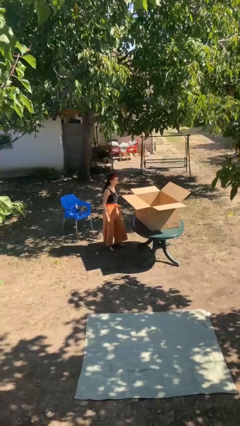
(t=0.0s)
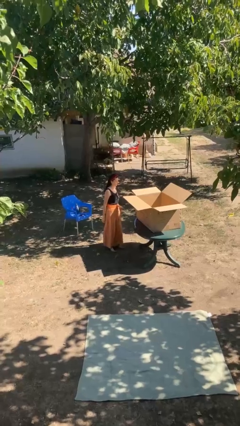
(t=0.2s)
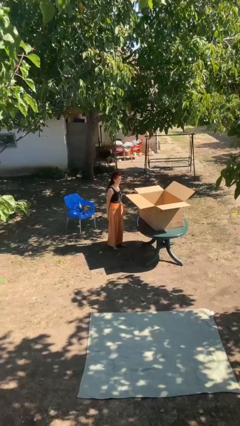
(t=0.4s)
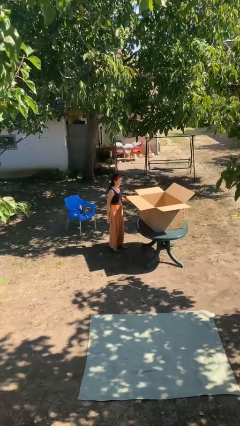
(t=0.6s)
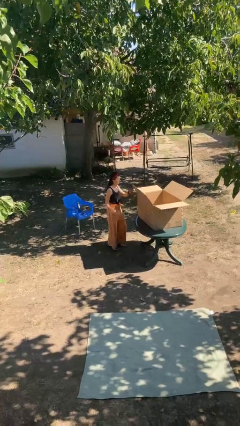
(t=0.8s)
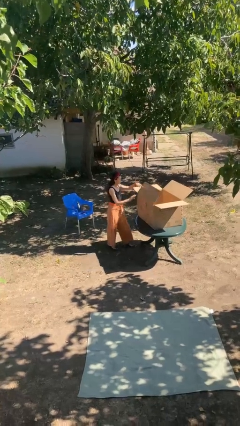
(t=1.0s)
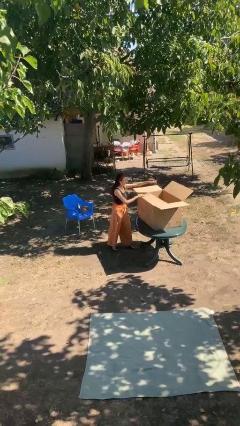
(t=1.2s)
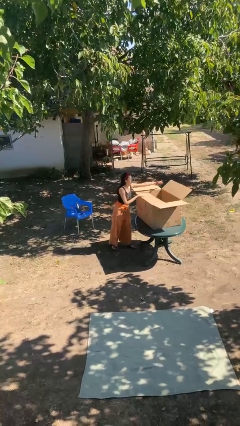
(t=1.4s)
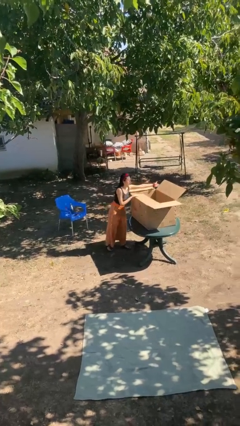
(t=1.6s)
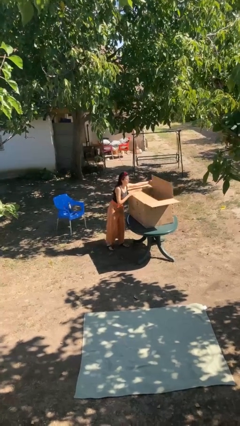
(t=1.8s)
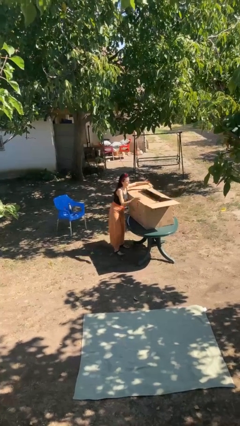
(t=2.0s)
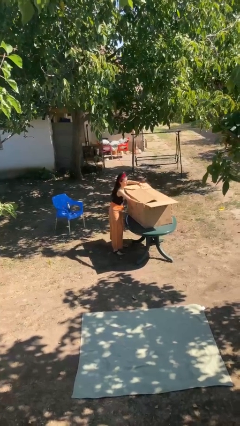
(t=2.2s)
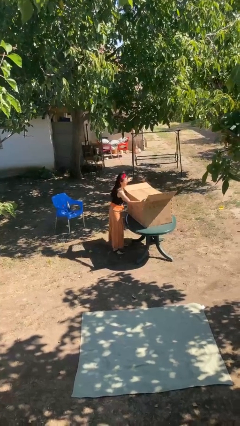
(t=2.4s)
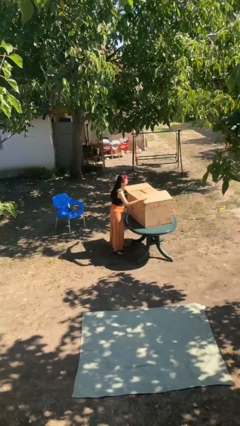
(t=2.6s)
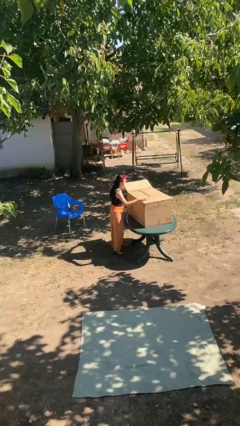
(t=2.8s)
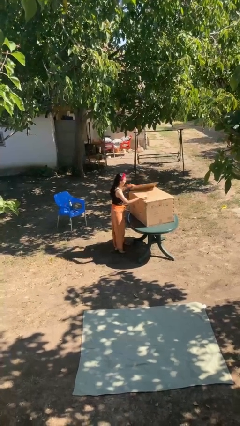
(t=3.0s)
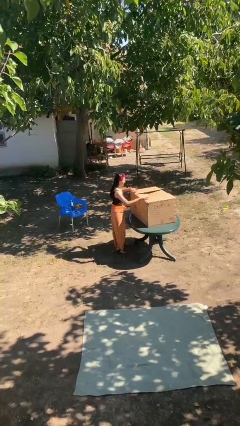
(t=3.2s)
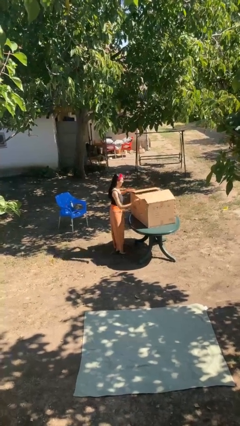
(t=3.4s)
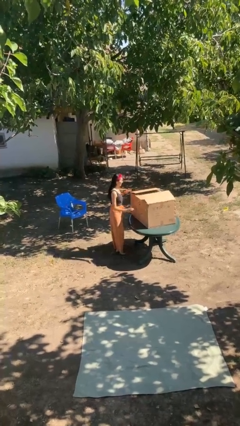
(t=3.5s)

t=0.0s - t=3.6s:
person closes box

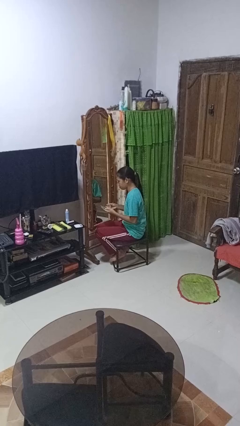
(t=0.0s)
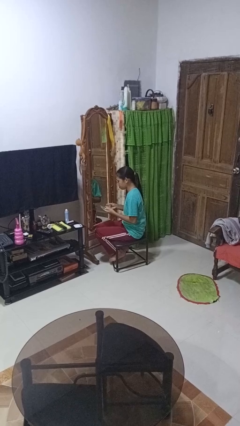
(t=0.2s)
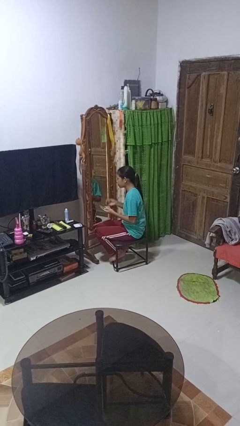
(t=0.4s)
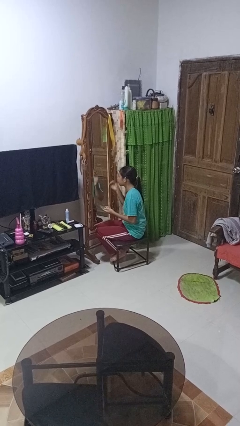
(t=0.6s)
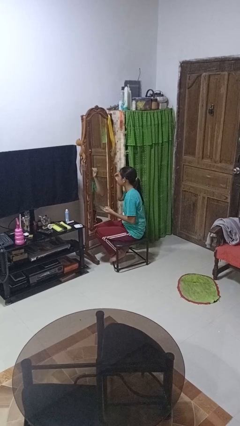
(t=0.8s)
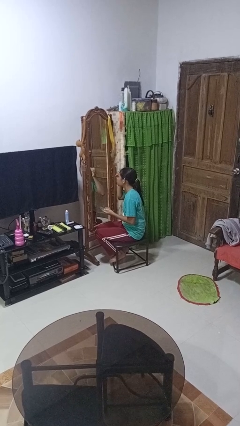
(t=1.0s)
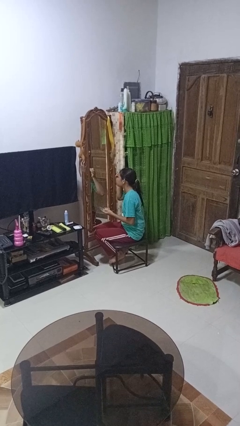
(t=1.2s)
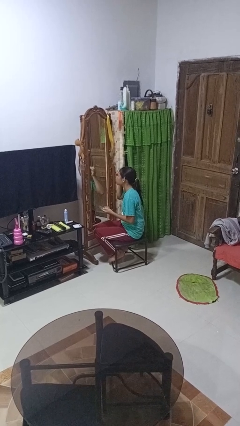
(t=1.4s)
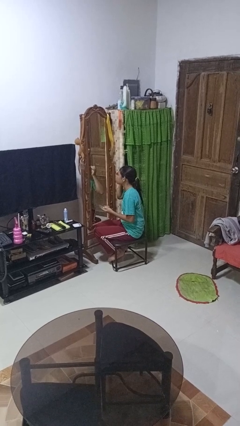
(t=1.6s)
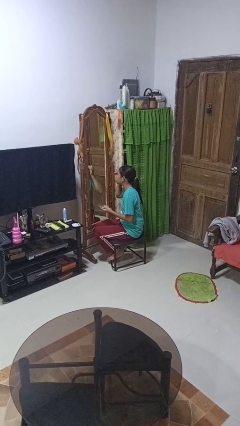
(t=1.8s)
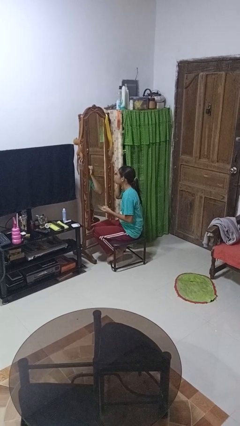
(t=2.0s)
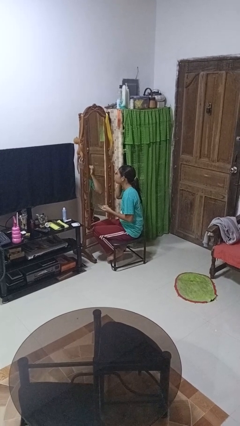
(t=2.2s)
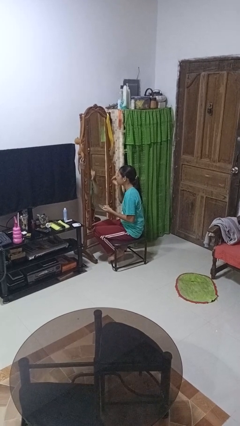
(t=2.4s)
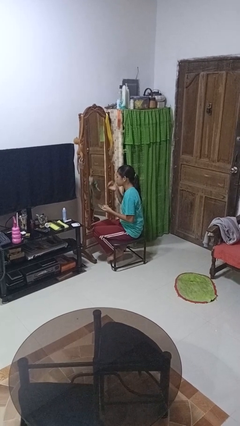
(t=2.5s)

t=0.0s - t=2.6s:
person applies eye makeup

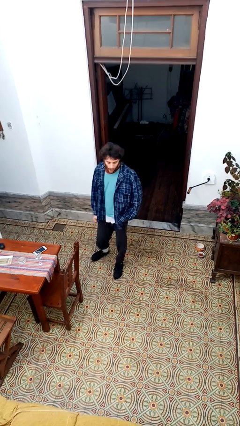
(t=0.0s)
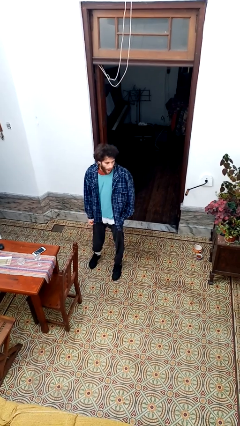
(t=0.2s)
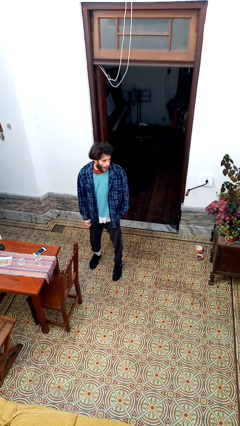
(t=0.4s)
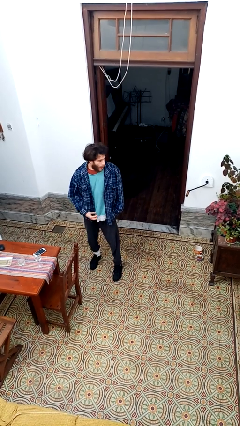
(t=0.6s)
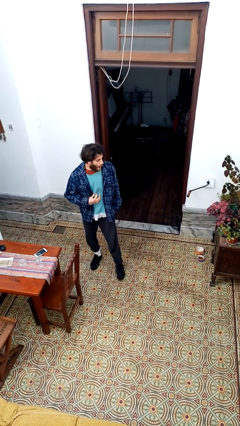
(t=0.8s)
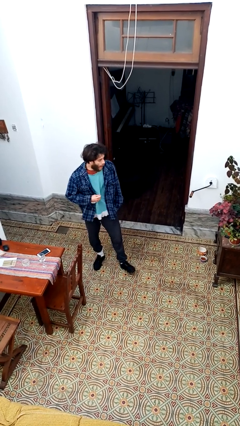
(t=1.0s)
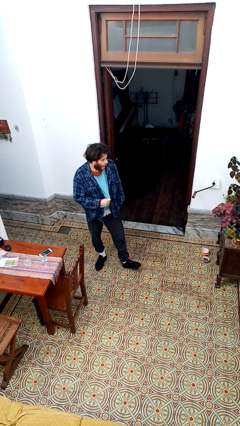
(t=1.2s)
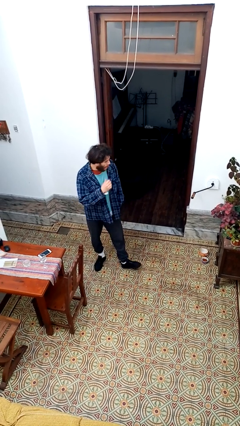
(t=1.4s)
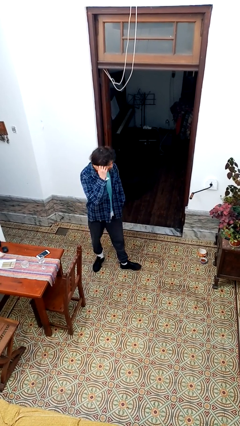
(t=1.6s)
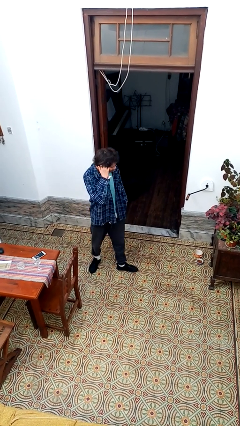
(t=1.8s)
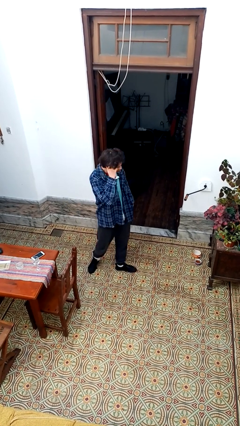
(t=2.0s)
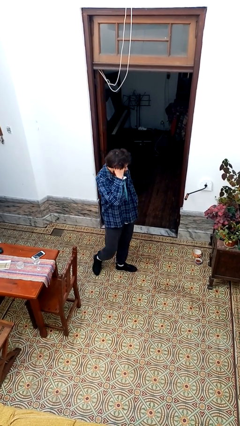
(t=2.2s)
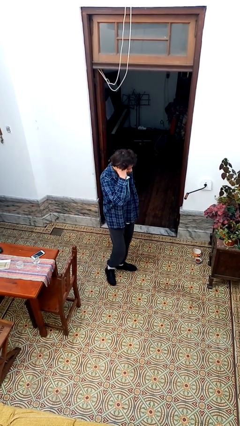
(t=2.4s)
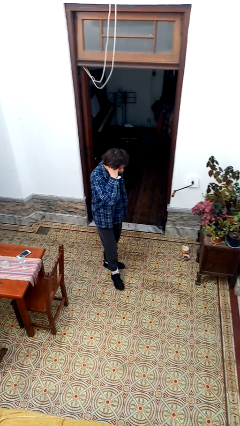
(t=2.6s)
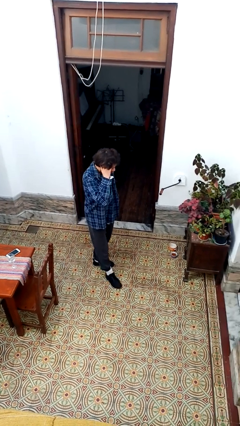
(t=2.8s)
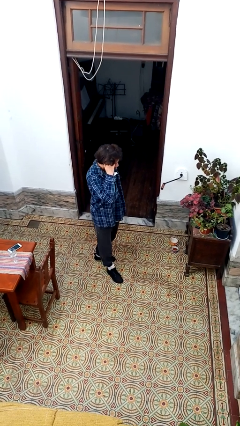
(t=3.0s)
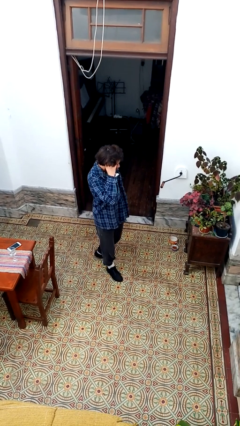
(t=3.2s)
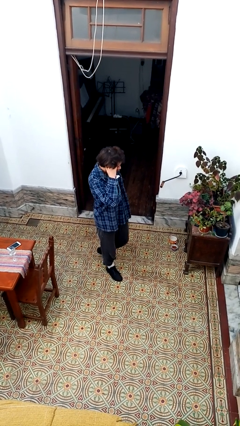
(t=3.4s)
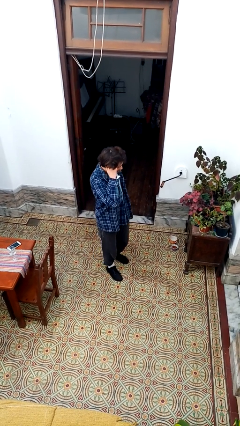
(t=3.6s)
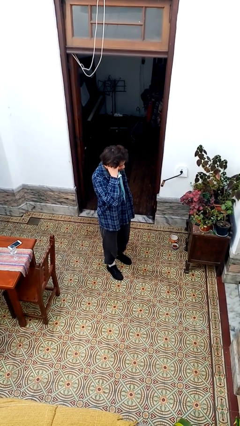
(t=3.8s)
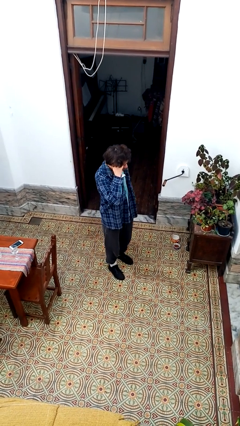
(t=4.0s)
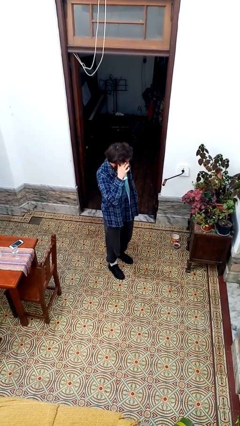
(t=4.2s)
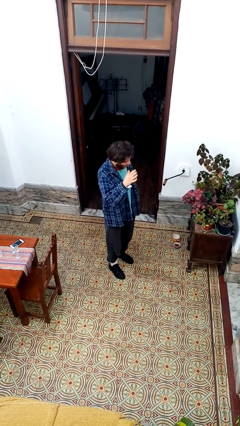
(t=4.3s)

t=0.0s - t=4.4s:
person scratches face

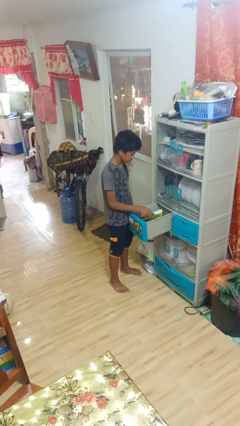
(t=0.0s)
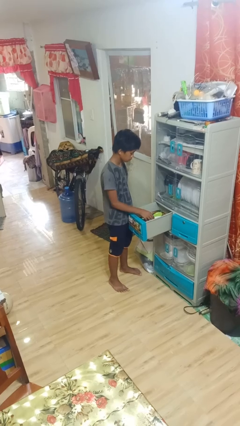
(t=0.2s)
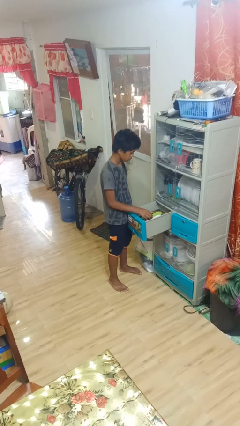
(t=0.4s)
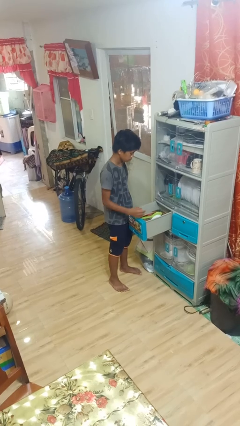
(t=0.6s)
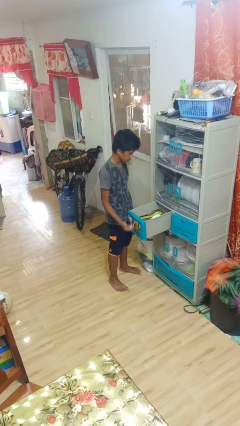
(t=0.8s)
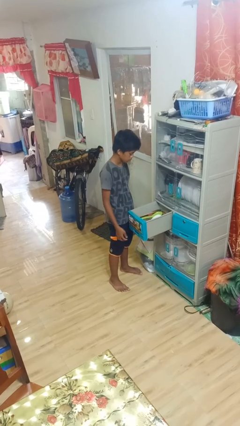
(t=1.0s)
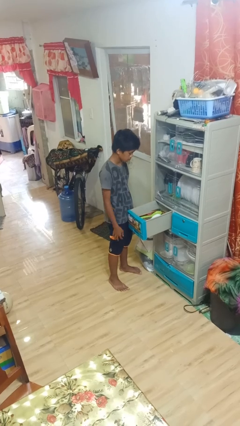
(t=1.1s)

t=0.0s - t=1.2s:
person puts object into kitchen drawer

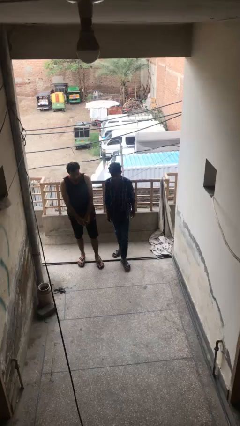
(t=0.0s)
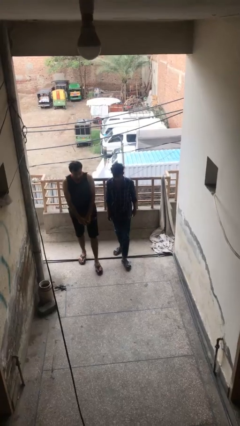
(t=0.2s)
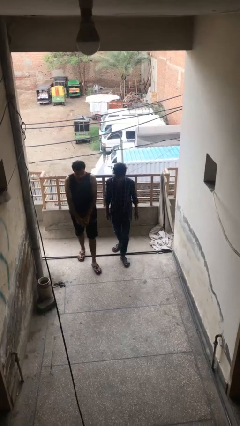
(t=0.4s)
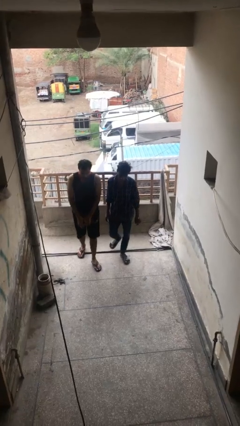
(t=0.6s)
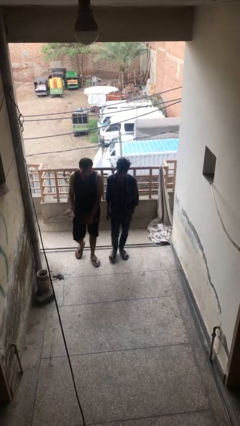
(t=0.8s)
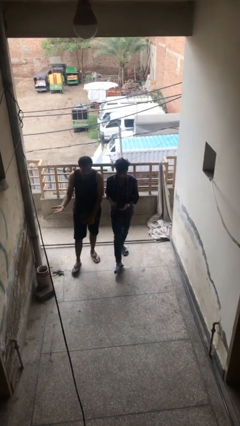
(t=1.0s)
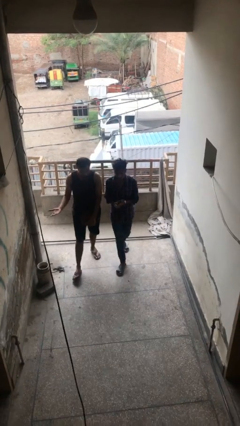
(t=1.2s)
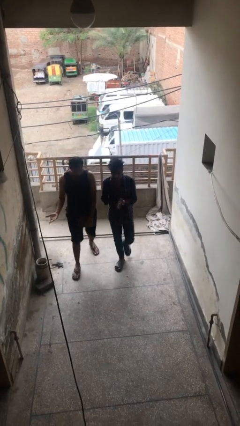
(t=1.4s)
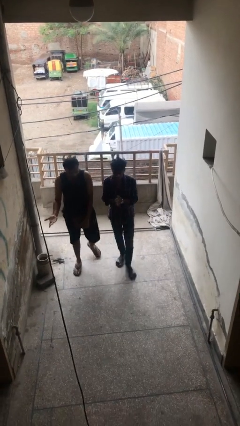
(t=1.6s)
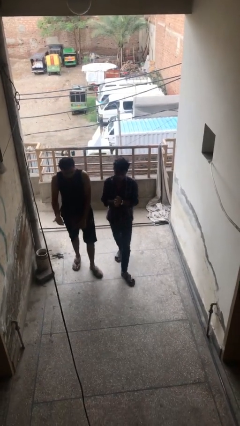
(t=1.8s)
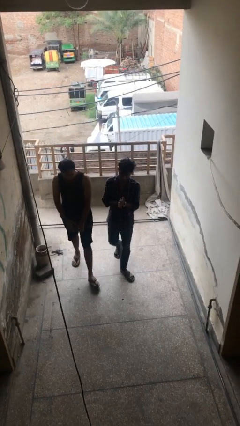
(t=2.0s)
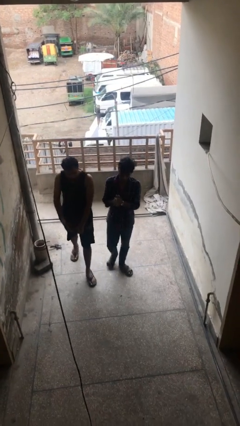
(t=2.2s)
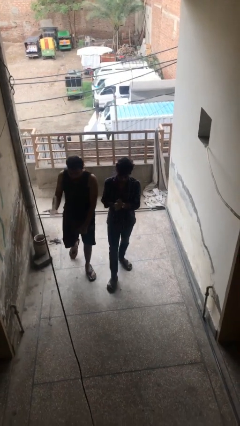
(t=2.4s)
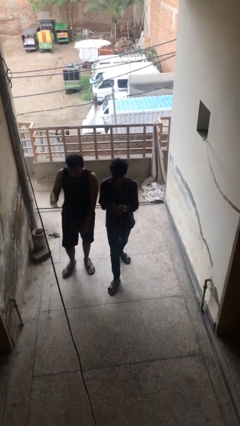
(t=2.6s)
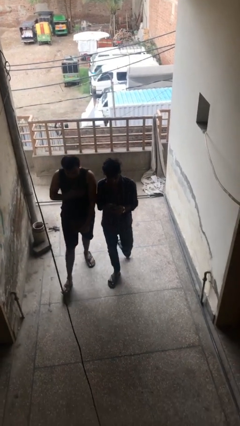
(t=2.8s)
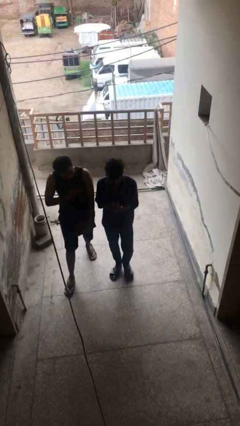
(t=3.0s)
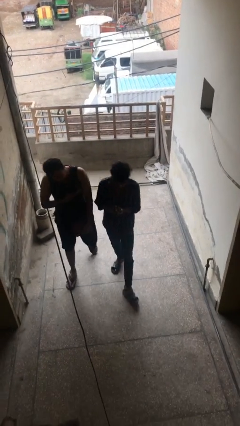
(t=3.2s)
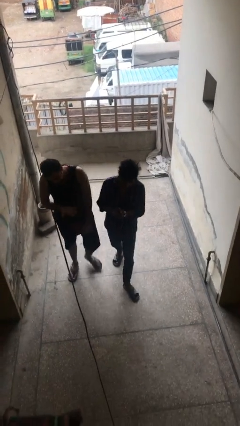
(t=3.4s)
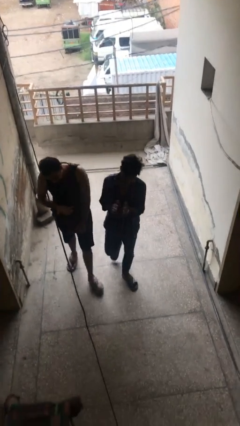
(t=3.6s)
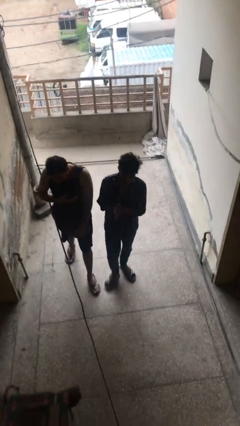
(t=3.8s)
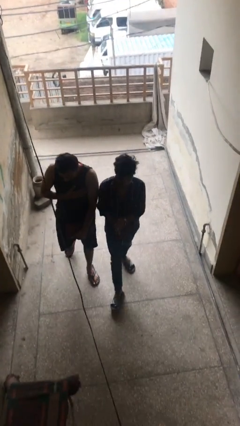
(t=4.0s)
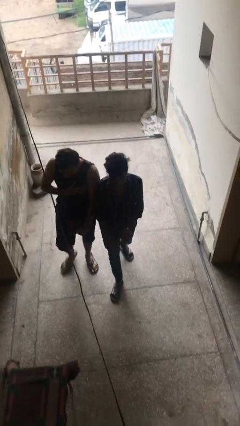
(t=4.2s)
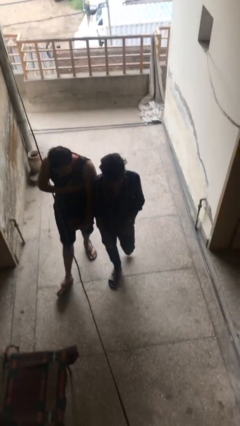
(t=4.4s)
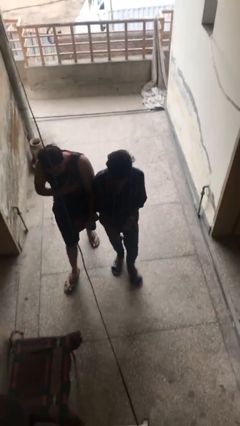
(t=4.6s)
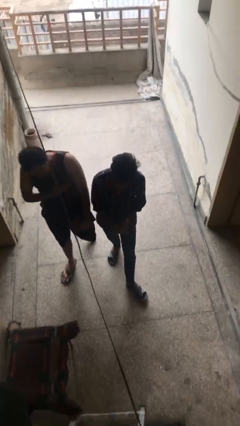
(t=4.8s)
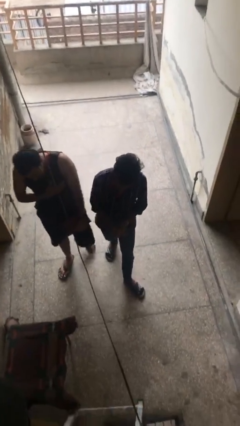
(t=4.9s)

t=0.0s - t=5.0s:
person talks to person

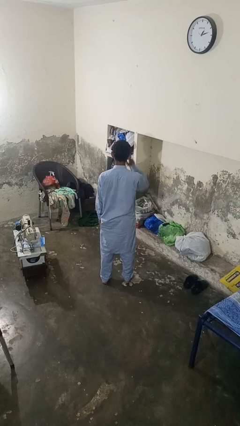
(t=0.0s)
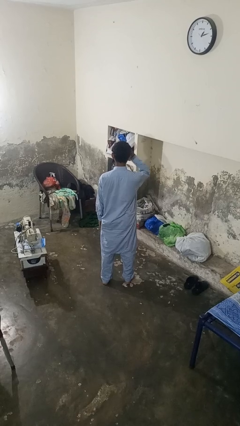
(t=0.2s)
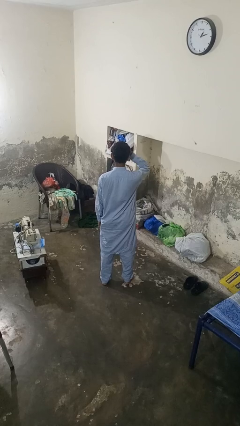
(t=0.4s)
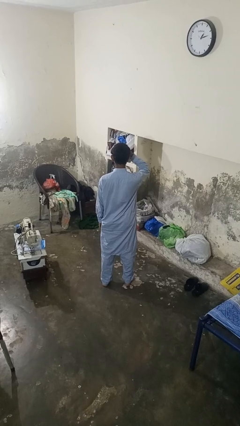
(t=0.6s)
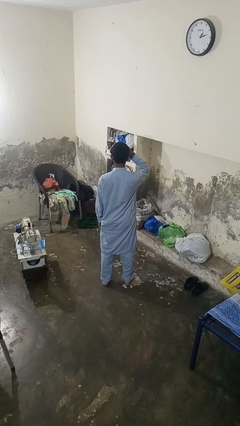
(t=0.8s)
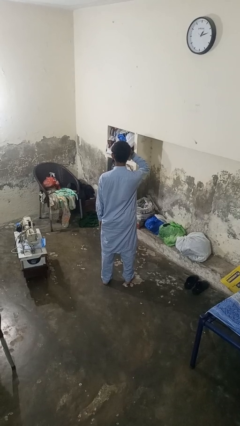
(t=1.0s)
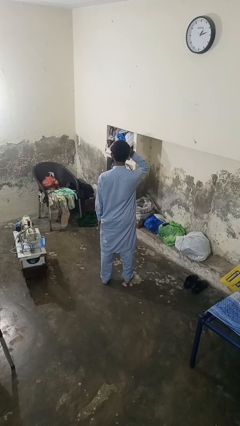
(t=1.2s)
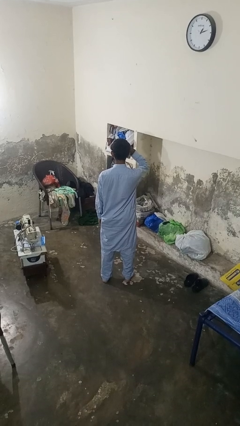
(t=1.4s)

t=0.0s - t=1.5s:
person rubs eyes
